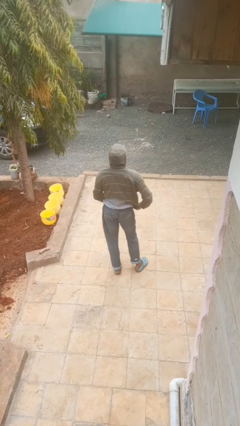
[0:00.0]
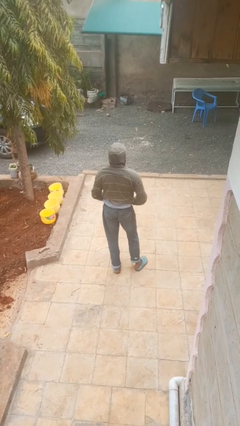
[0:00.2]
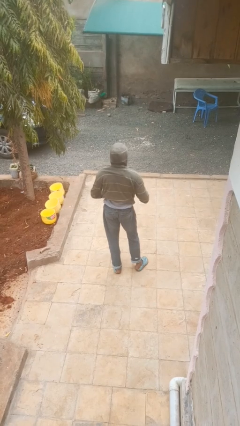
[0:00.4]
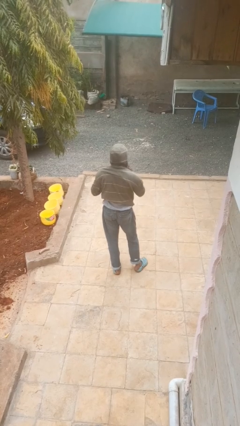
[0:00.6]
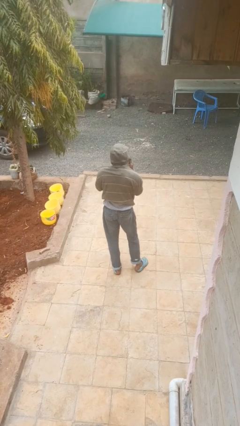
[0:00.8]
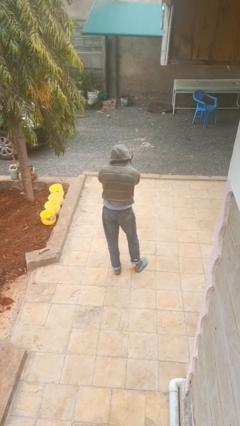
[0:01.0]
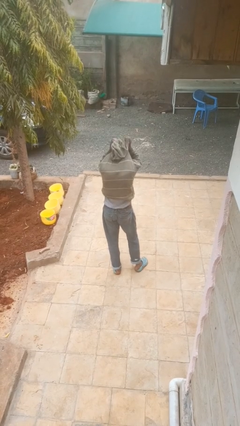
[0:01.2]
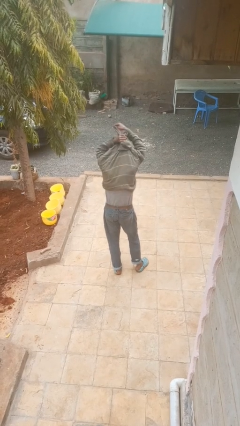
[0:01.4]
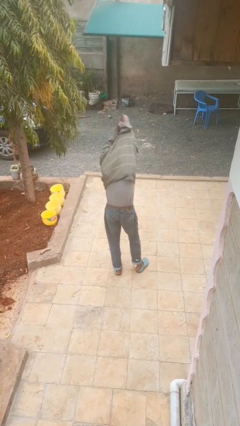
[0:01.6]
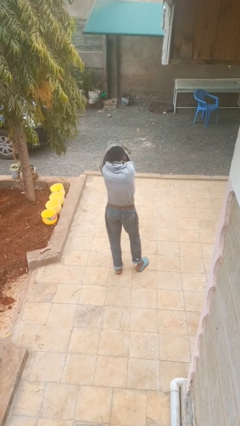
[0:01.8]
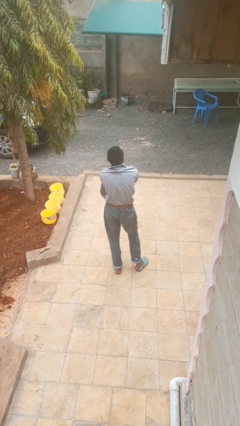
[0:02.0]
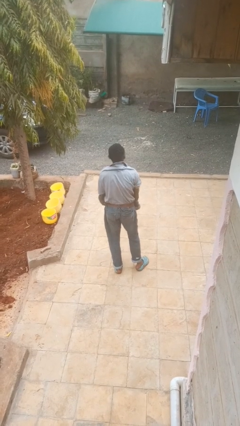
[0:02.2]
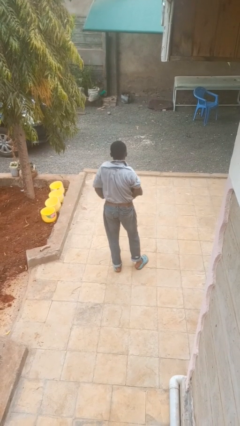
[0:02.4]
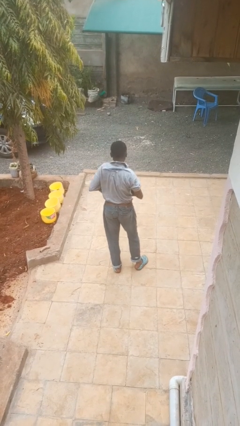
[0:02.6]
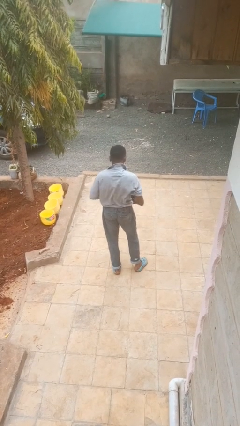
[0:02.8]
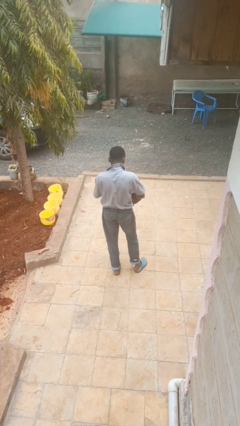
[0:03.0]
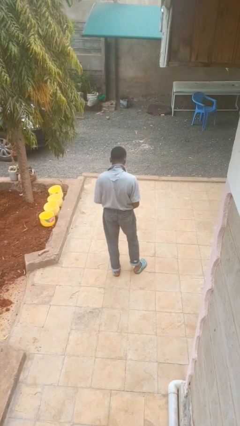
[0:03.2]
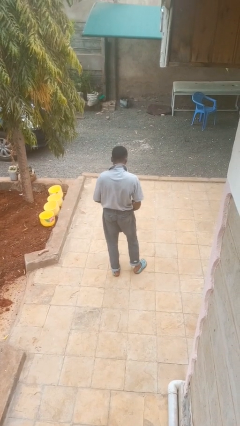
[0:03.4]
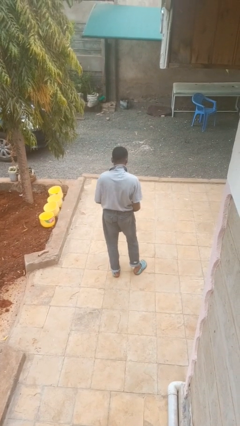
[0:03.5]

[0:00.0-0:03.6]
person takes off hoodie

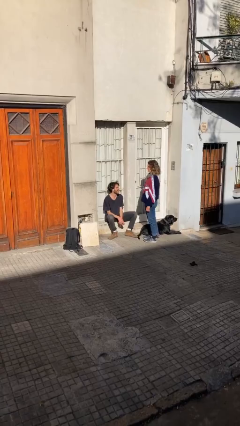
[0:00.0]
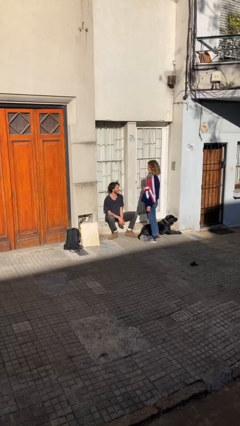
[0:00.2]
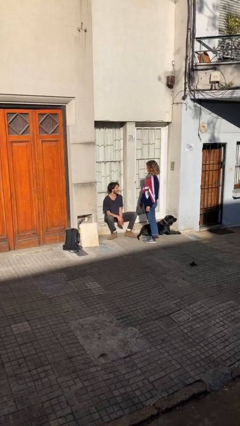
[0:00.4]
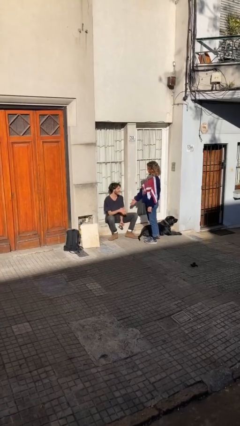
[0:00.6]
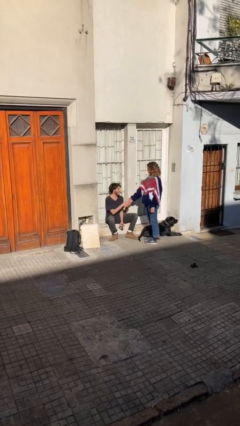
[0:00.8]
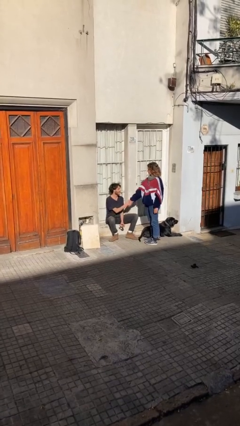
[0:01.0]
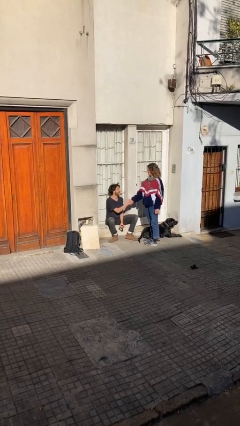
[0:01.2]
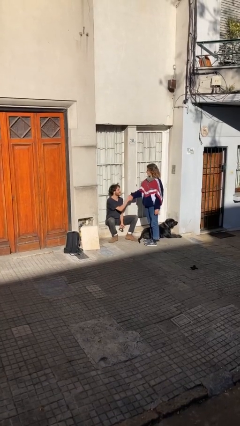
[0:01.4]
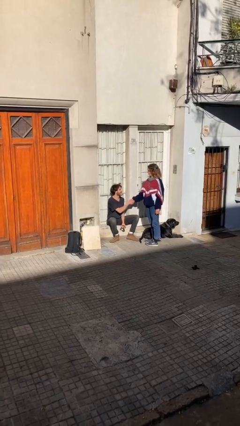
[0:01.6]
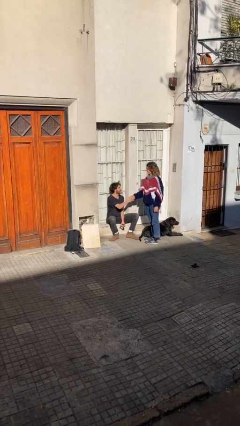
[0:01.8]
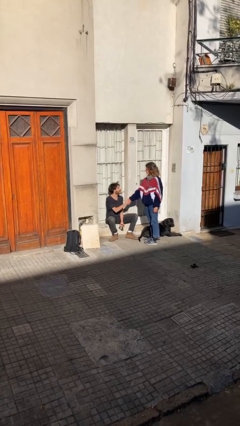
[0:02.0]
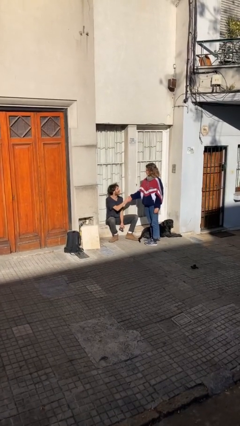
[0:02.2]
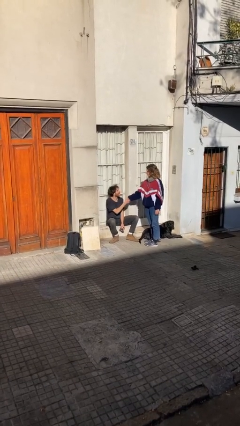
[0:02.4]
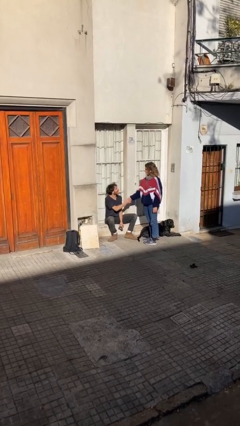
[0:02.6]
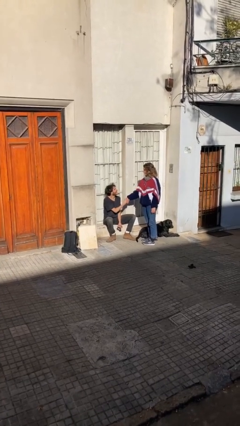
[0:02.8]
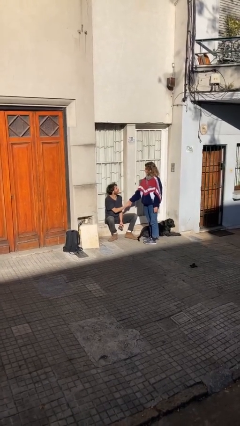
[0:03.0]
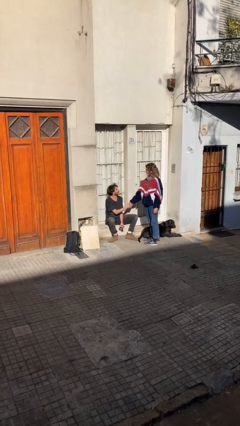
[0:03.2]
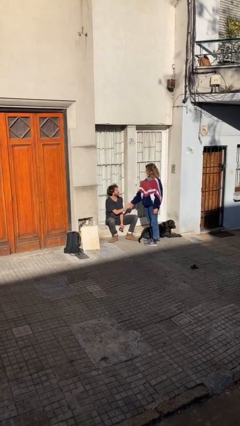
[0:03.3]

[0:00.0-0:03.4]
person shakes hand

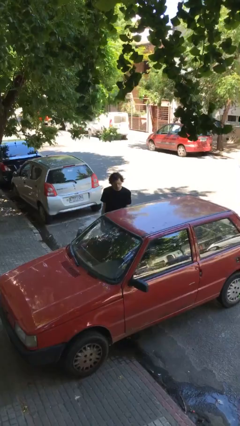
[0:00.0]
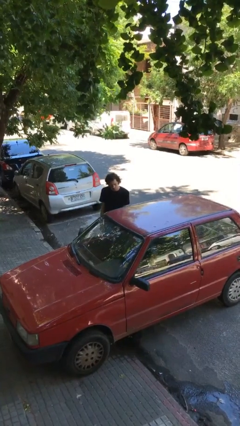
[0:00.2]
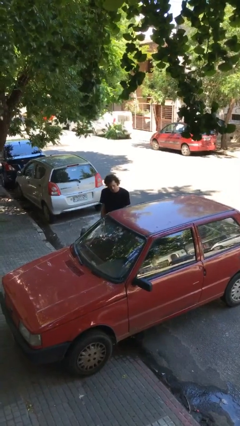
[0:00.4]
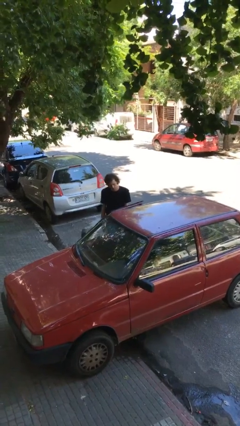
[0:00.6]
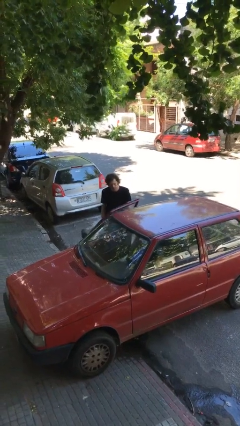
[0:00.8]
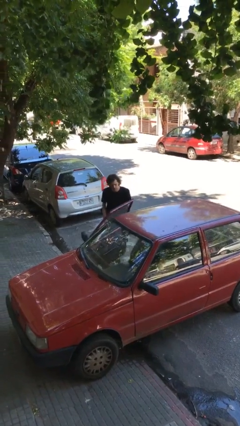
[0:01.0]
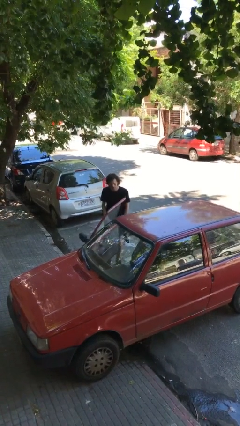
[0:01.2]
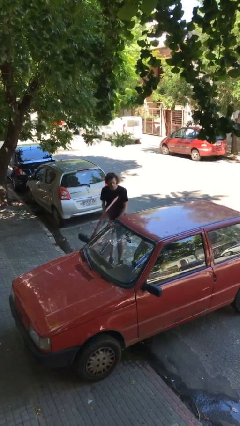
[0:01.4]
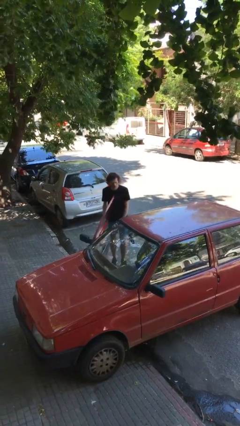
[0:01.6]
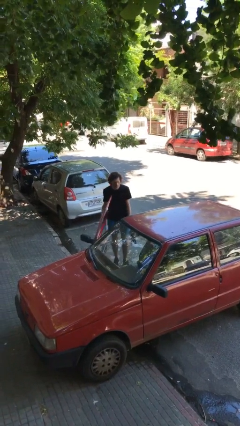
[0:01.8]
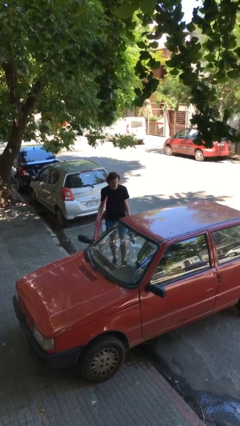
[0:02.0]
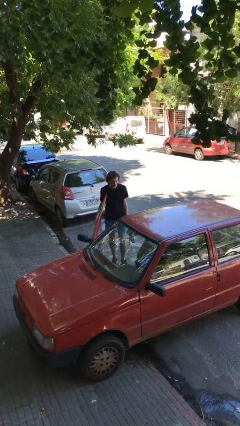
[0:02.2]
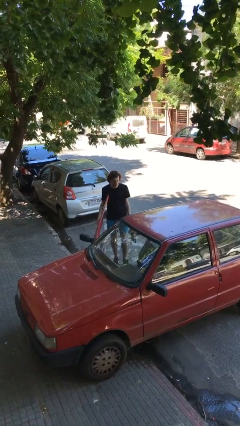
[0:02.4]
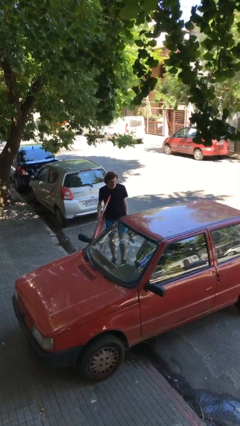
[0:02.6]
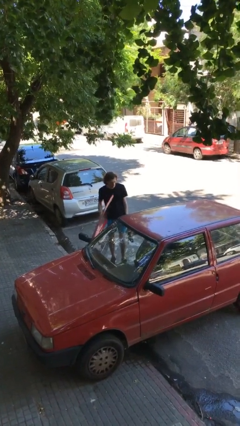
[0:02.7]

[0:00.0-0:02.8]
person opens car door

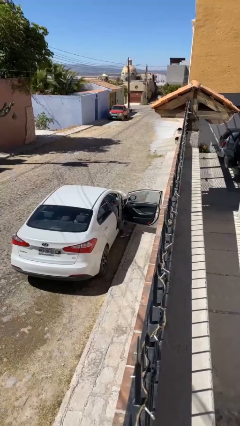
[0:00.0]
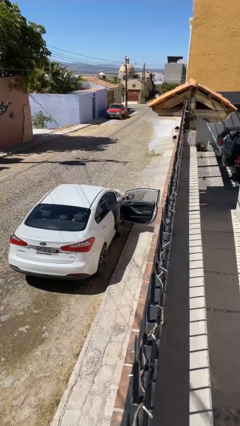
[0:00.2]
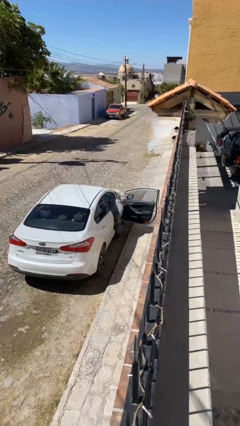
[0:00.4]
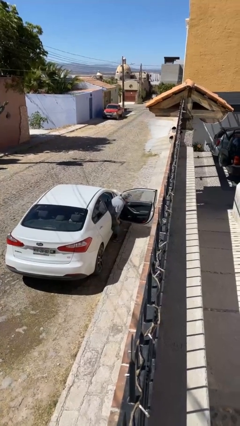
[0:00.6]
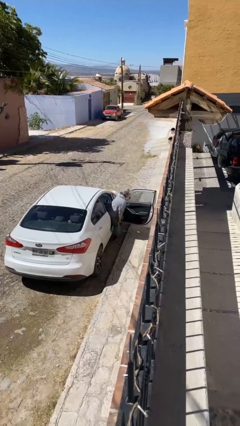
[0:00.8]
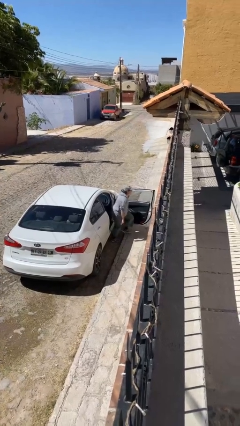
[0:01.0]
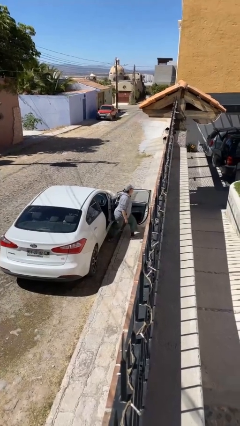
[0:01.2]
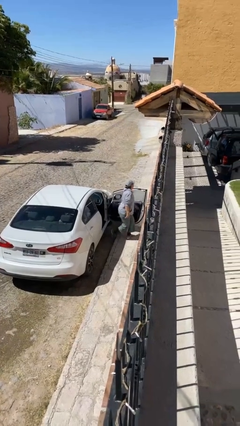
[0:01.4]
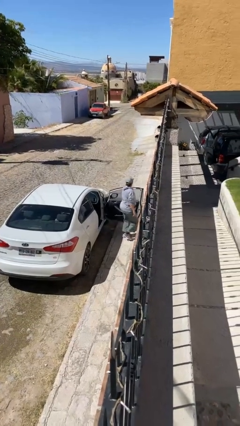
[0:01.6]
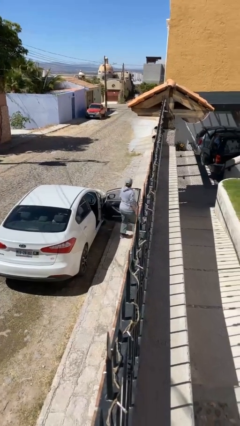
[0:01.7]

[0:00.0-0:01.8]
person exits car

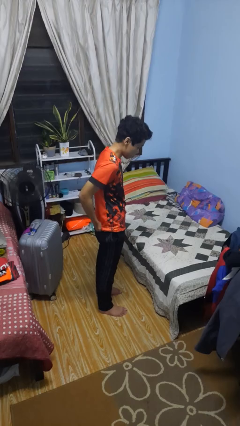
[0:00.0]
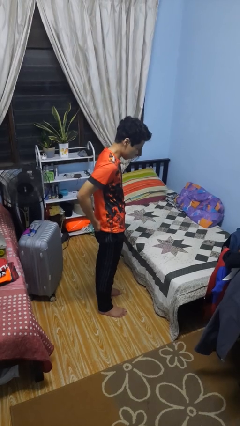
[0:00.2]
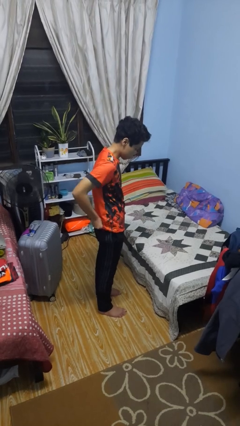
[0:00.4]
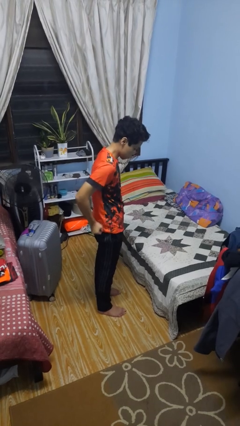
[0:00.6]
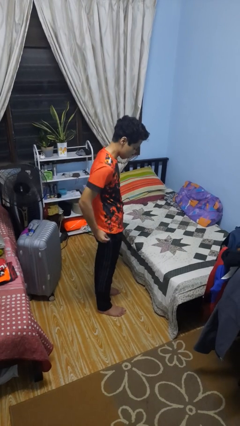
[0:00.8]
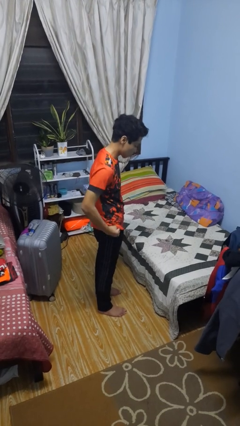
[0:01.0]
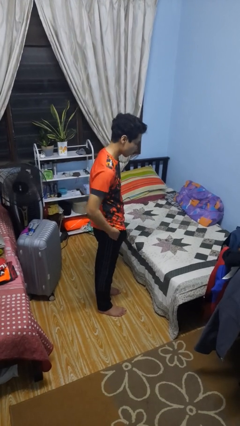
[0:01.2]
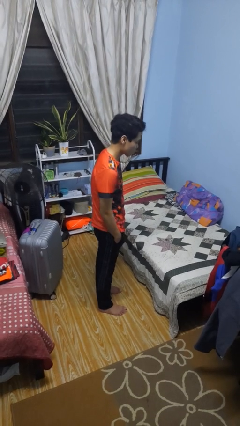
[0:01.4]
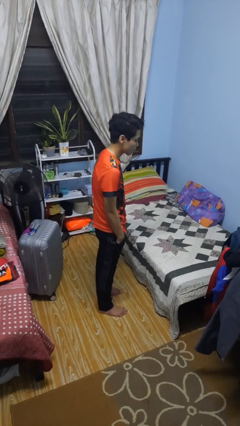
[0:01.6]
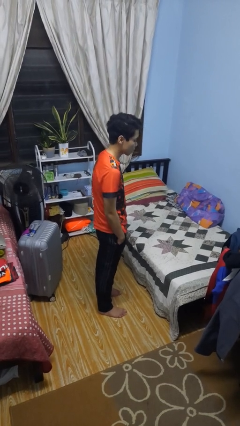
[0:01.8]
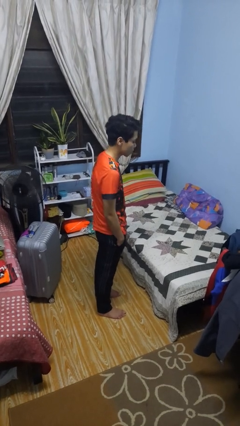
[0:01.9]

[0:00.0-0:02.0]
person puts hands in back pockets

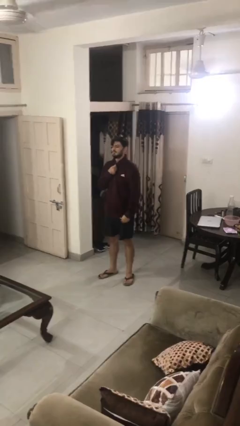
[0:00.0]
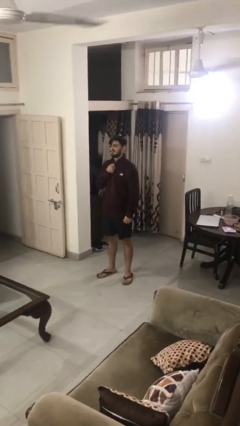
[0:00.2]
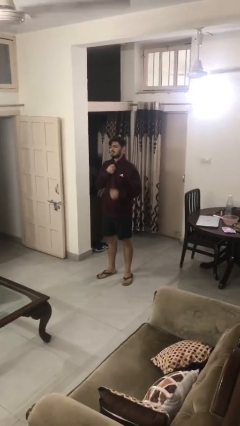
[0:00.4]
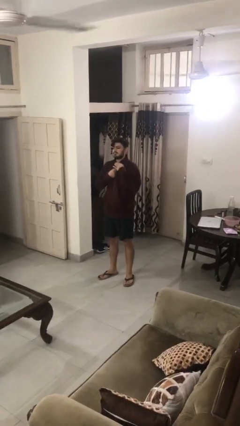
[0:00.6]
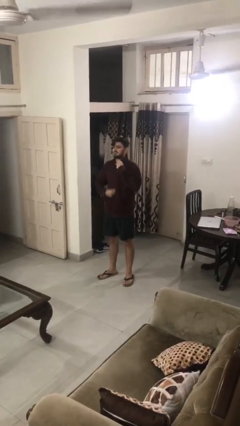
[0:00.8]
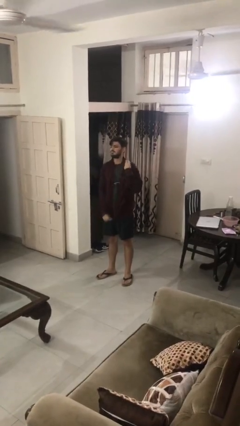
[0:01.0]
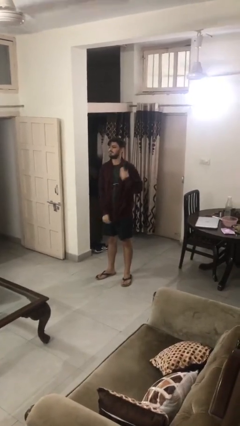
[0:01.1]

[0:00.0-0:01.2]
person unzips jacket

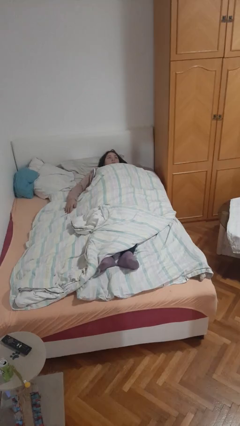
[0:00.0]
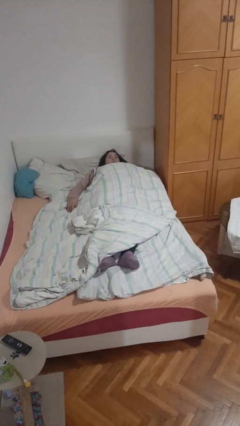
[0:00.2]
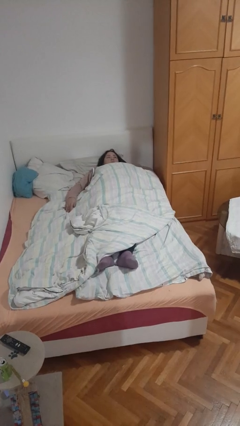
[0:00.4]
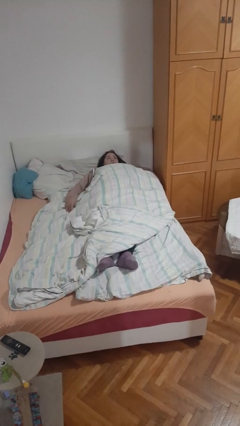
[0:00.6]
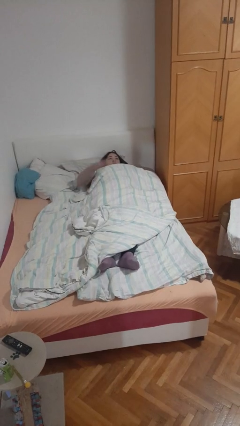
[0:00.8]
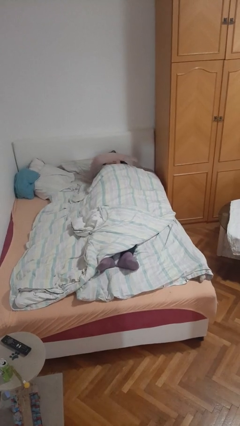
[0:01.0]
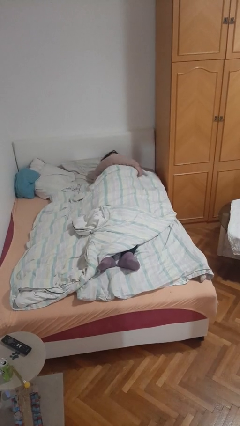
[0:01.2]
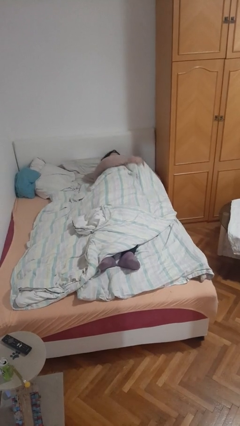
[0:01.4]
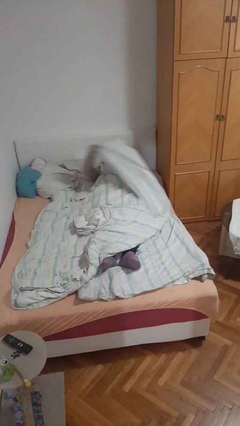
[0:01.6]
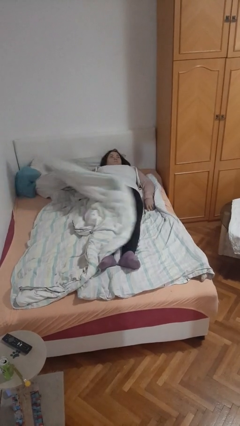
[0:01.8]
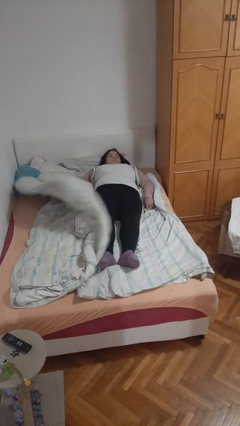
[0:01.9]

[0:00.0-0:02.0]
person uncovers with bedsheets

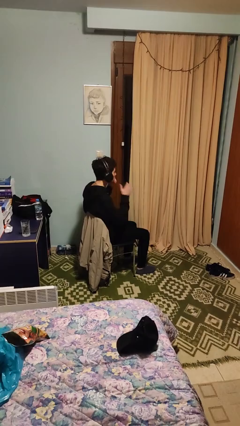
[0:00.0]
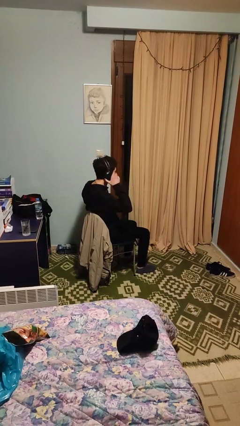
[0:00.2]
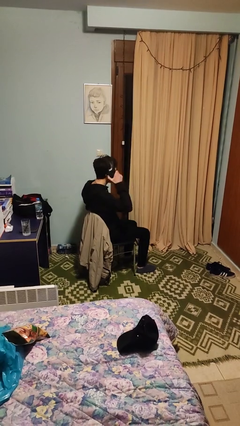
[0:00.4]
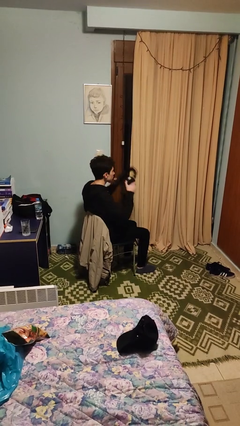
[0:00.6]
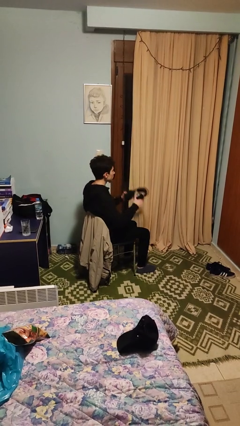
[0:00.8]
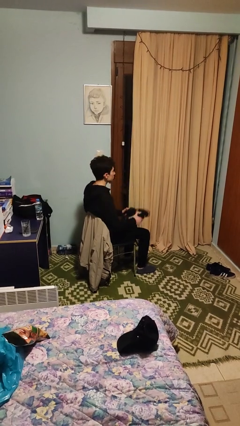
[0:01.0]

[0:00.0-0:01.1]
person takes off headphones
